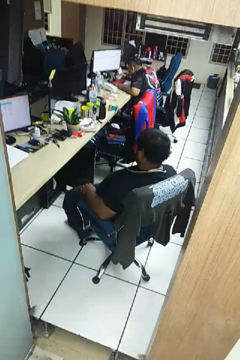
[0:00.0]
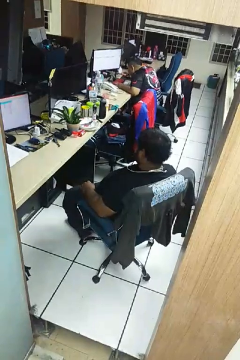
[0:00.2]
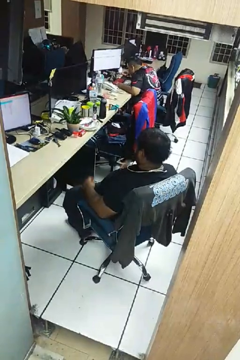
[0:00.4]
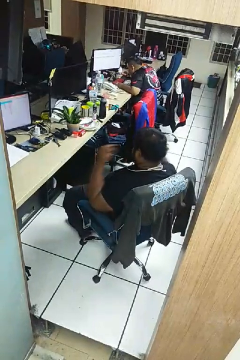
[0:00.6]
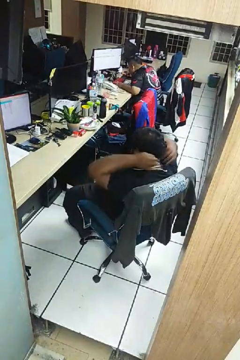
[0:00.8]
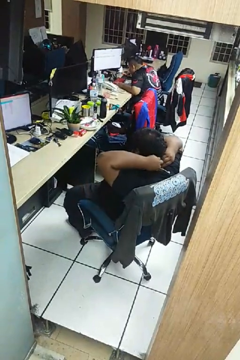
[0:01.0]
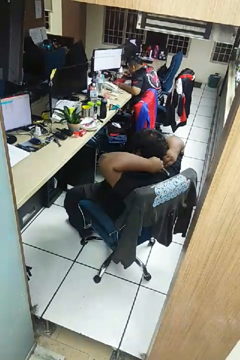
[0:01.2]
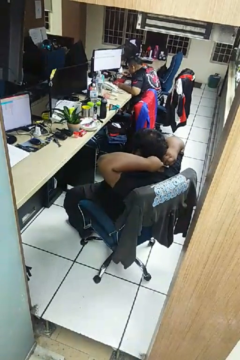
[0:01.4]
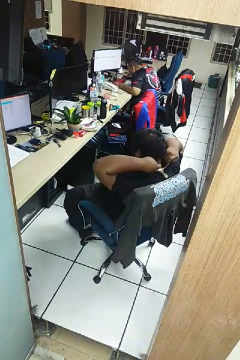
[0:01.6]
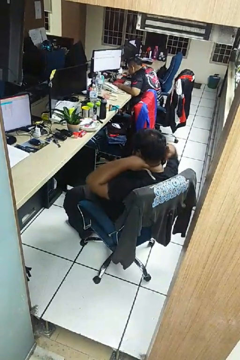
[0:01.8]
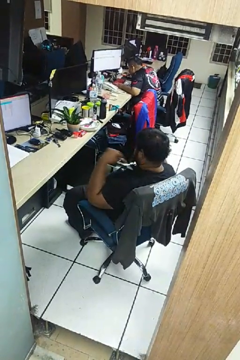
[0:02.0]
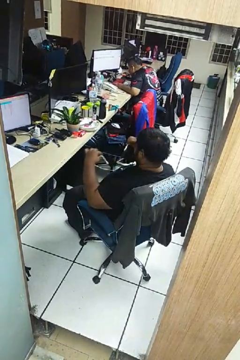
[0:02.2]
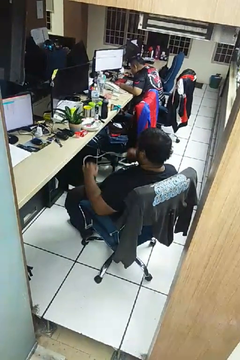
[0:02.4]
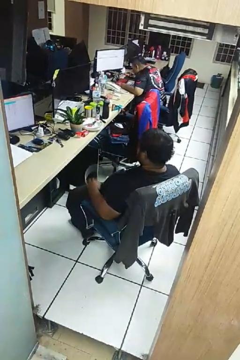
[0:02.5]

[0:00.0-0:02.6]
person takes off necklace

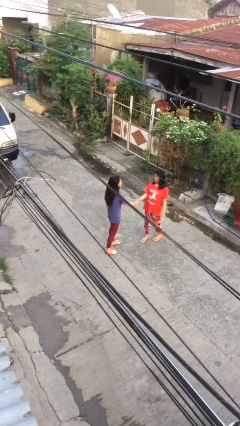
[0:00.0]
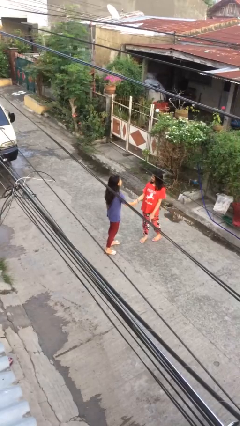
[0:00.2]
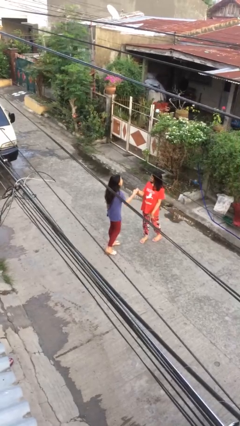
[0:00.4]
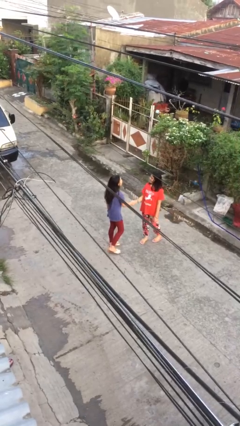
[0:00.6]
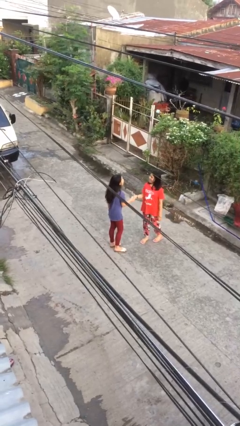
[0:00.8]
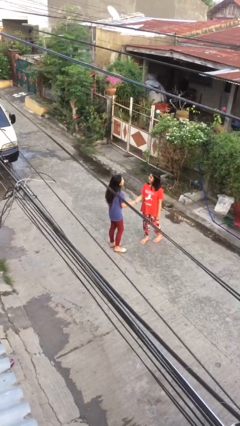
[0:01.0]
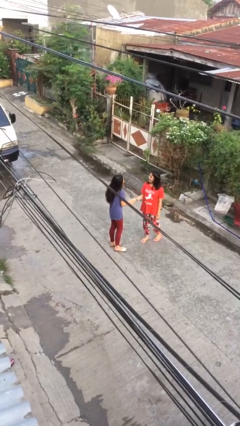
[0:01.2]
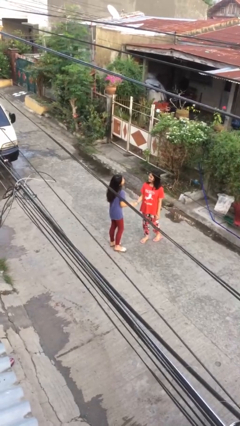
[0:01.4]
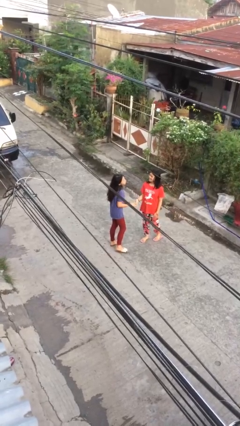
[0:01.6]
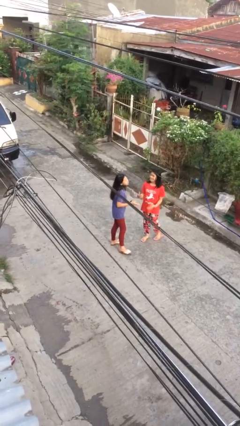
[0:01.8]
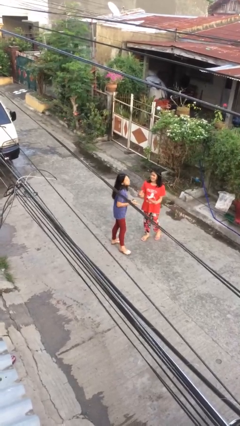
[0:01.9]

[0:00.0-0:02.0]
person shakes hand

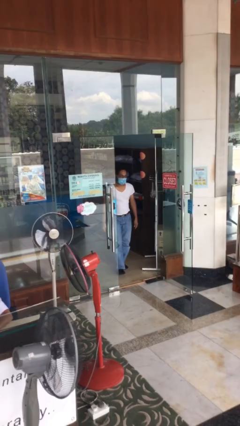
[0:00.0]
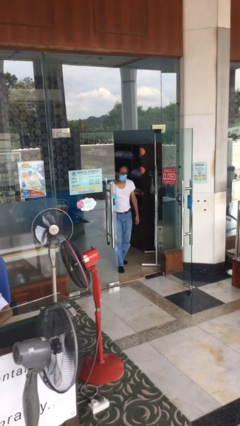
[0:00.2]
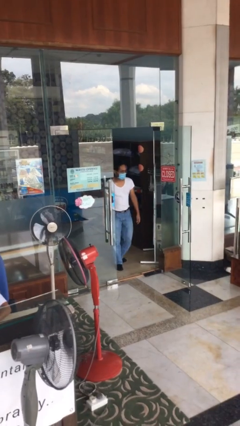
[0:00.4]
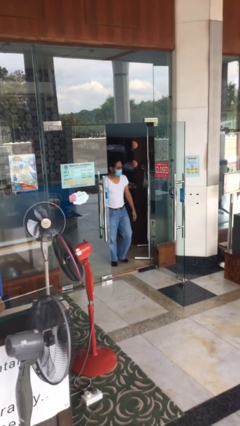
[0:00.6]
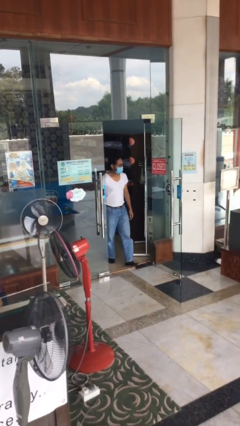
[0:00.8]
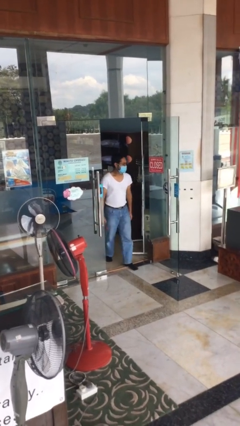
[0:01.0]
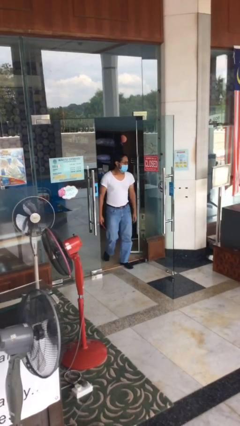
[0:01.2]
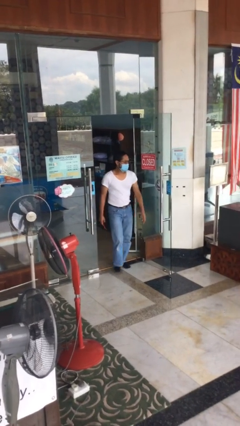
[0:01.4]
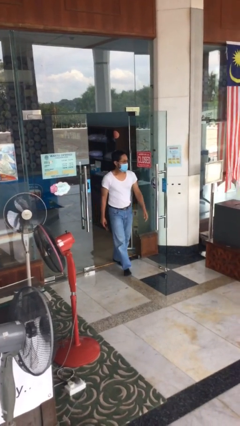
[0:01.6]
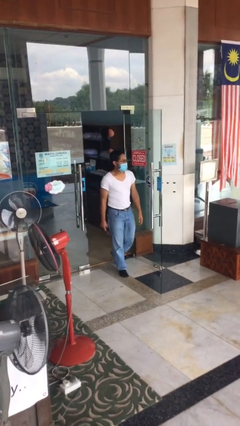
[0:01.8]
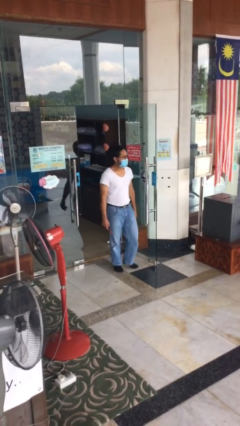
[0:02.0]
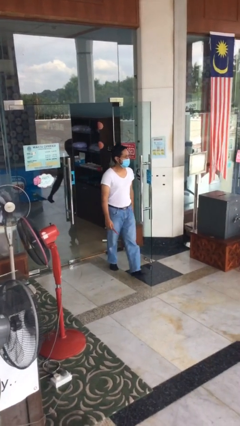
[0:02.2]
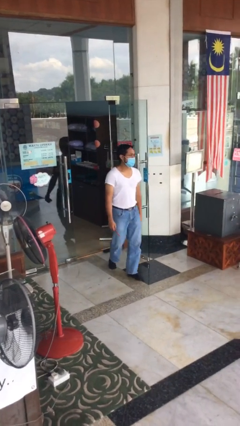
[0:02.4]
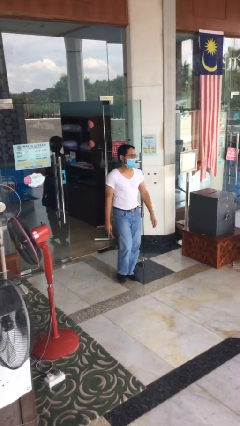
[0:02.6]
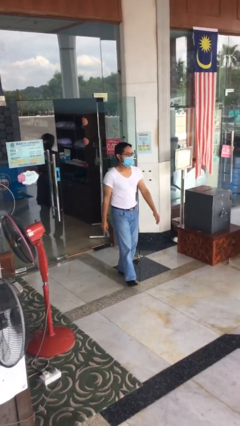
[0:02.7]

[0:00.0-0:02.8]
person enters scene through structure

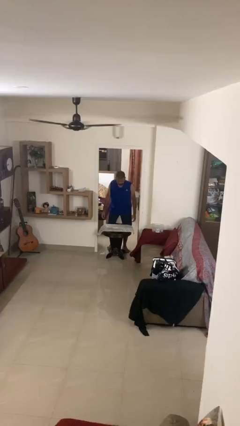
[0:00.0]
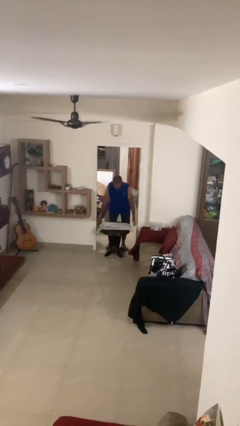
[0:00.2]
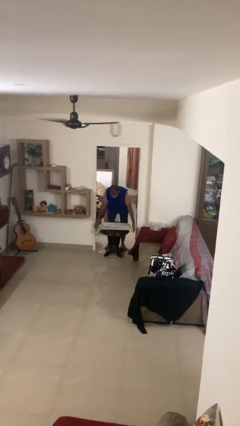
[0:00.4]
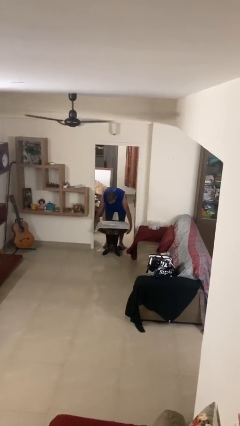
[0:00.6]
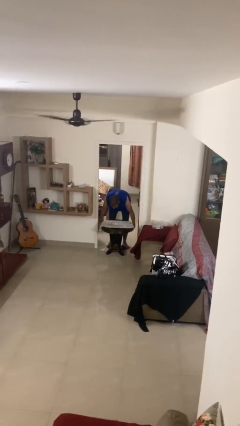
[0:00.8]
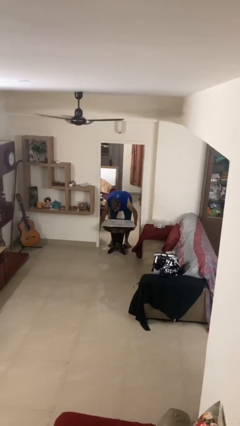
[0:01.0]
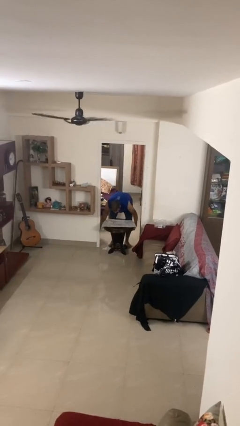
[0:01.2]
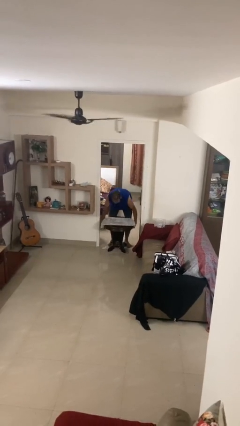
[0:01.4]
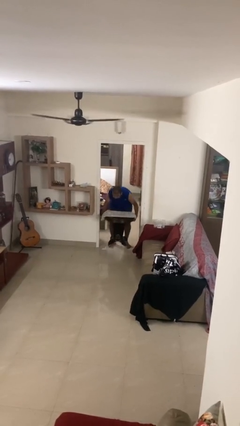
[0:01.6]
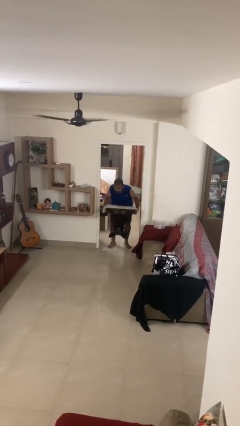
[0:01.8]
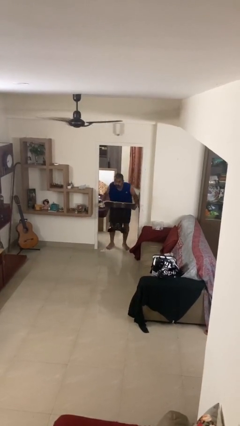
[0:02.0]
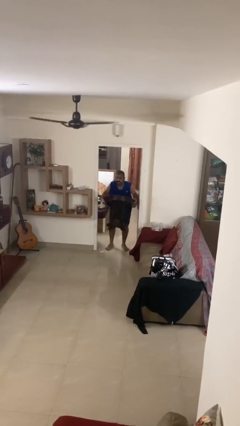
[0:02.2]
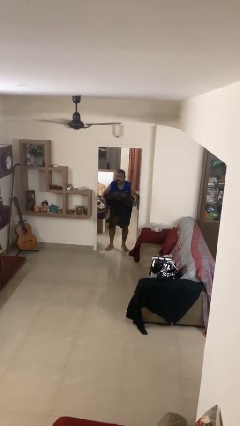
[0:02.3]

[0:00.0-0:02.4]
person picks up object from floor

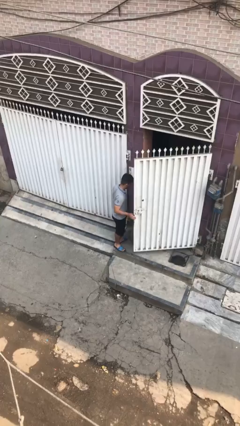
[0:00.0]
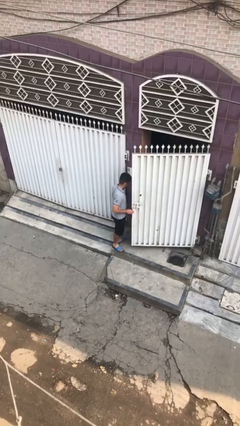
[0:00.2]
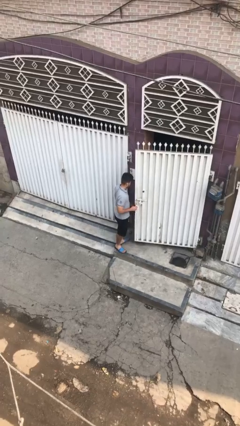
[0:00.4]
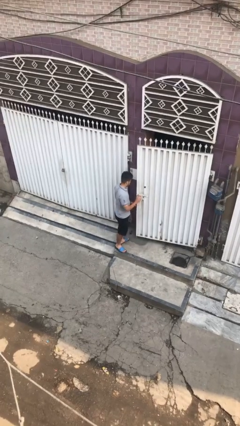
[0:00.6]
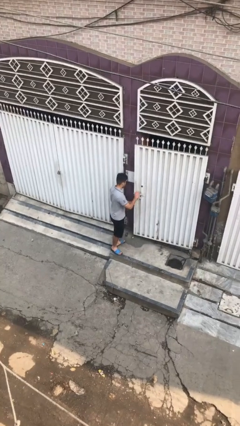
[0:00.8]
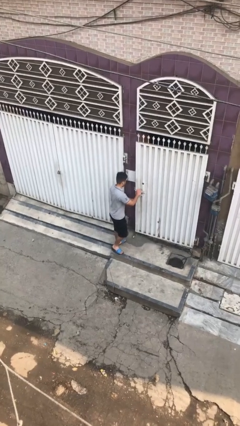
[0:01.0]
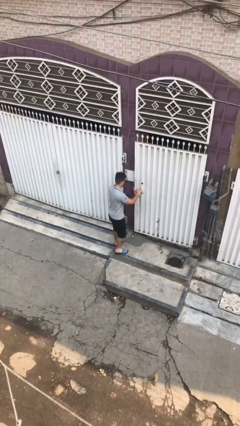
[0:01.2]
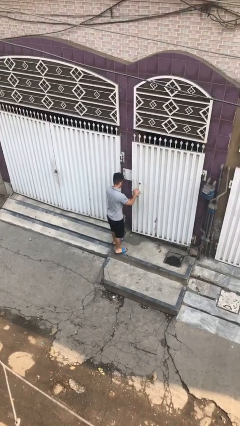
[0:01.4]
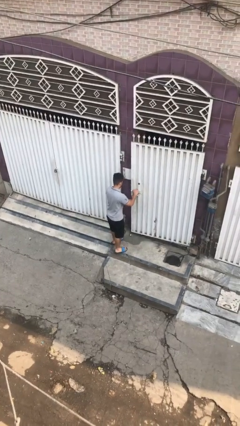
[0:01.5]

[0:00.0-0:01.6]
person closes facility door

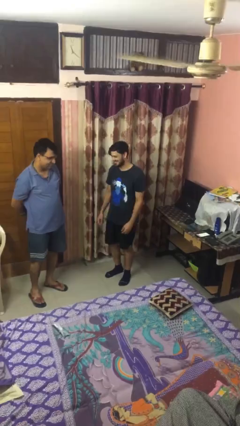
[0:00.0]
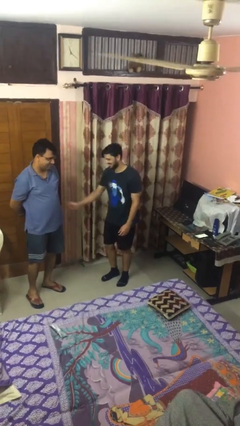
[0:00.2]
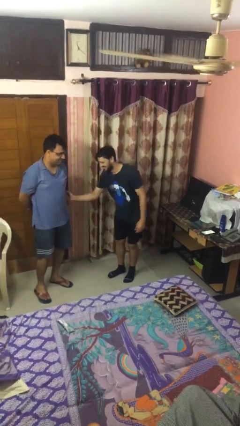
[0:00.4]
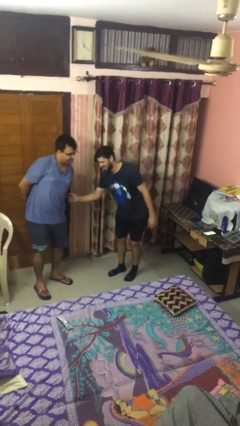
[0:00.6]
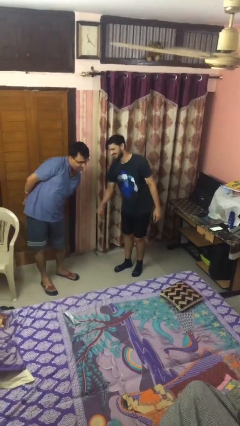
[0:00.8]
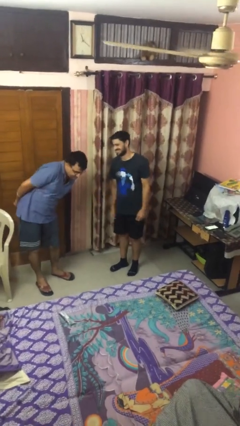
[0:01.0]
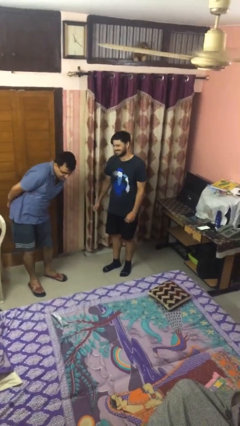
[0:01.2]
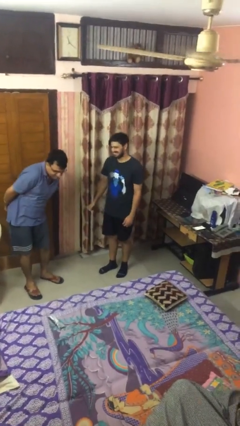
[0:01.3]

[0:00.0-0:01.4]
person tickles person

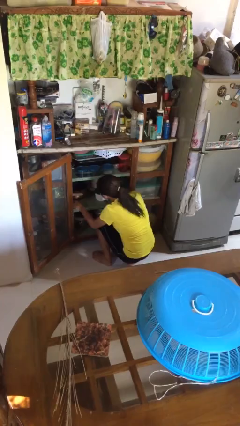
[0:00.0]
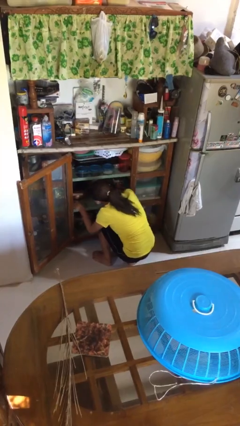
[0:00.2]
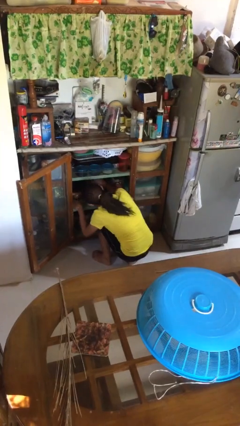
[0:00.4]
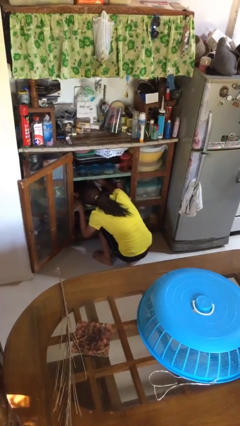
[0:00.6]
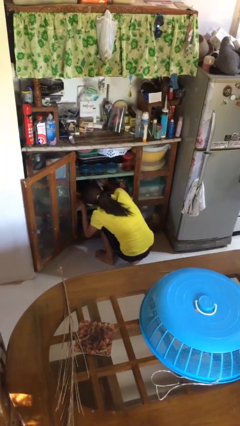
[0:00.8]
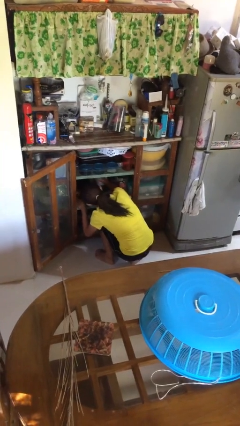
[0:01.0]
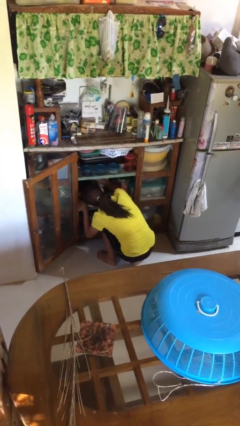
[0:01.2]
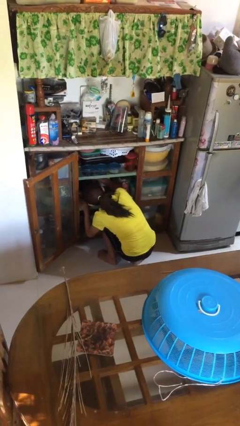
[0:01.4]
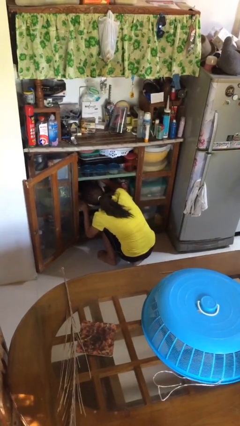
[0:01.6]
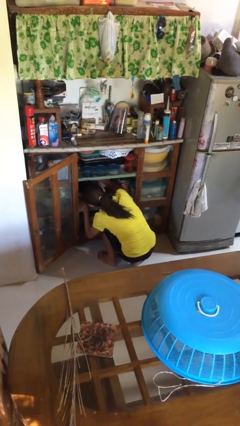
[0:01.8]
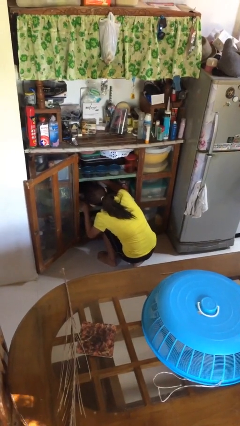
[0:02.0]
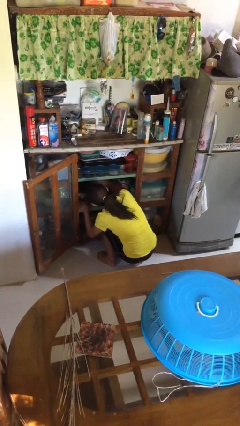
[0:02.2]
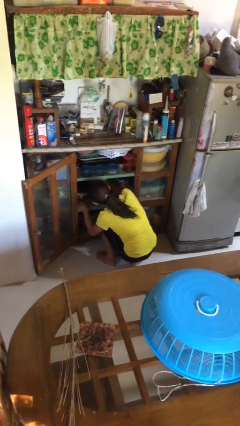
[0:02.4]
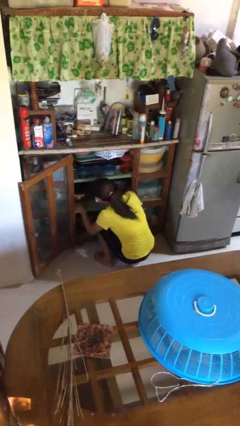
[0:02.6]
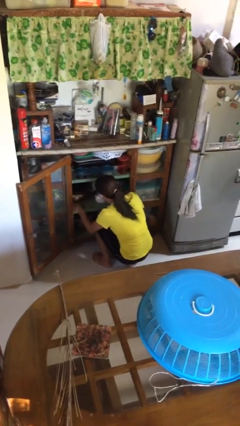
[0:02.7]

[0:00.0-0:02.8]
person searches in cabinet

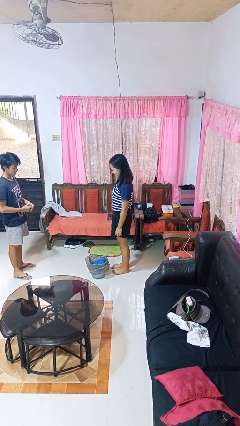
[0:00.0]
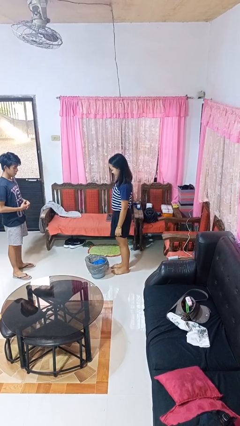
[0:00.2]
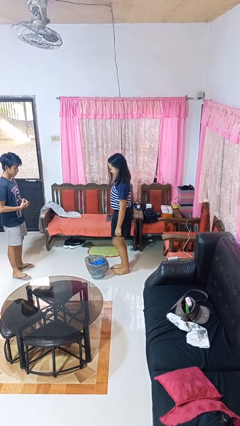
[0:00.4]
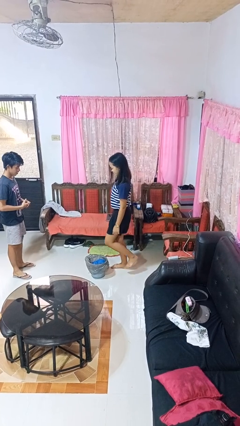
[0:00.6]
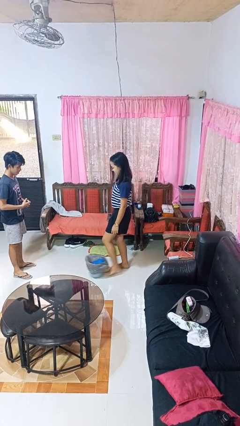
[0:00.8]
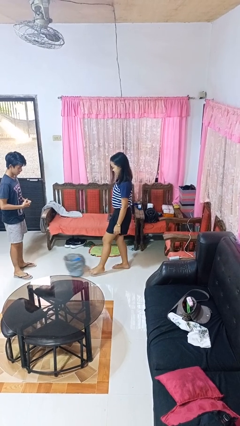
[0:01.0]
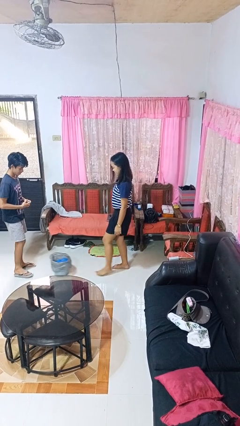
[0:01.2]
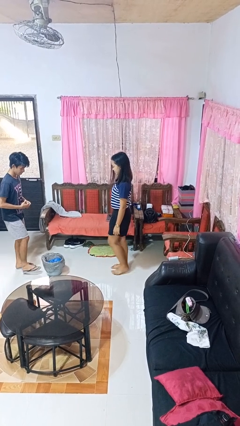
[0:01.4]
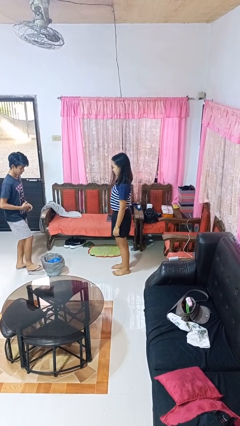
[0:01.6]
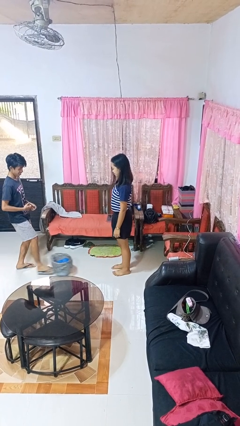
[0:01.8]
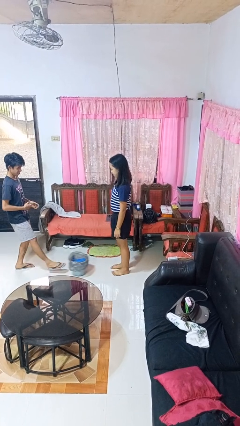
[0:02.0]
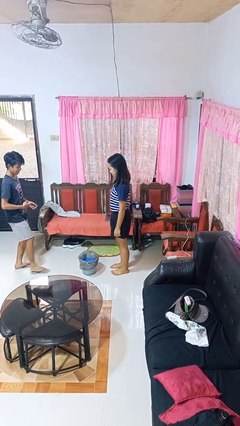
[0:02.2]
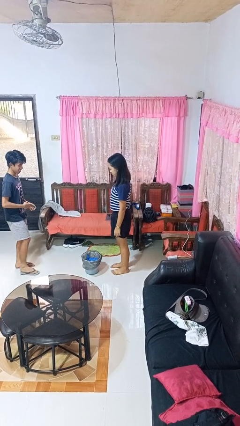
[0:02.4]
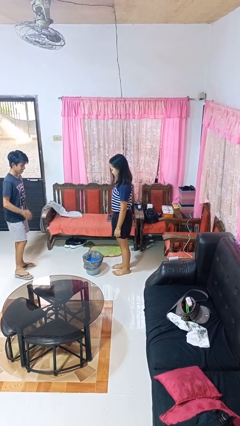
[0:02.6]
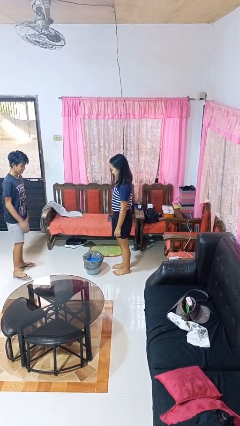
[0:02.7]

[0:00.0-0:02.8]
person kicks object to person
